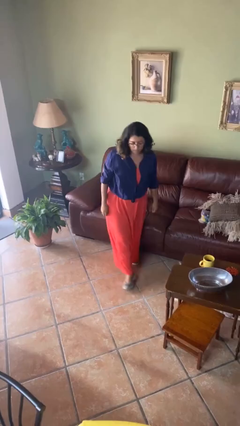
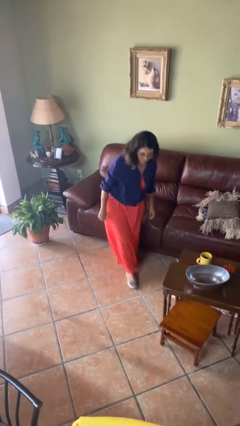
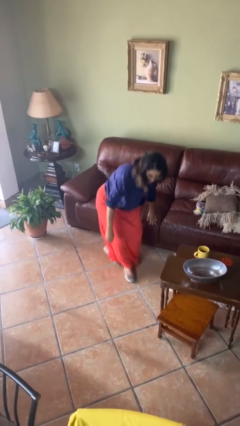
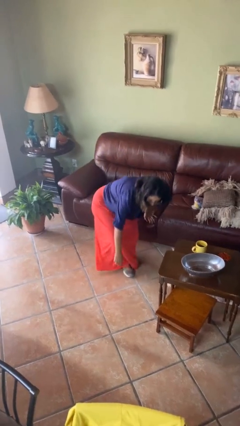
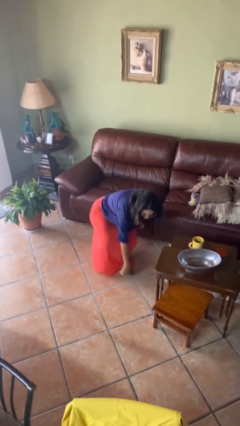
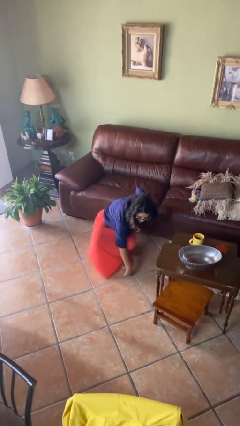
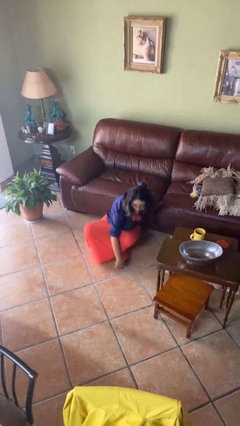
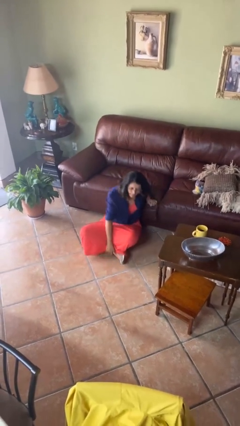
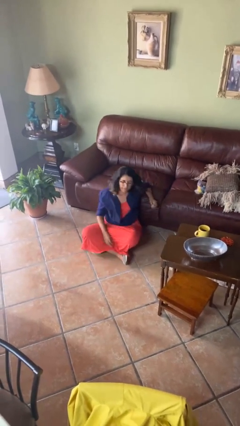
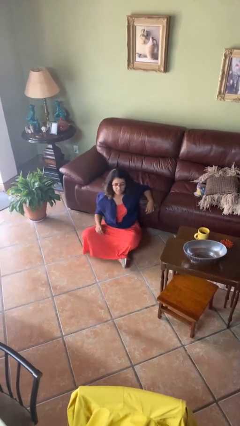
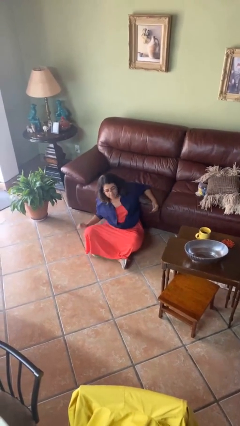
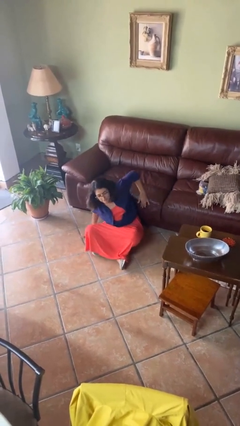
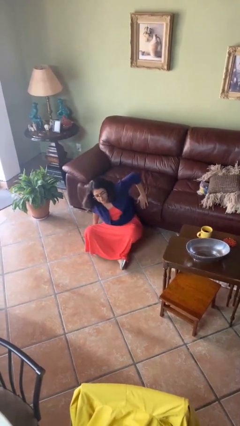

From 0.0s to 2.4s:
person sits crisscross

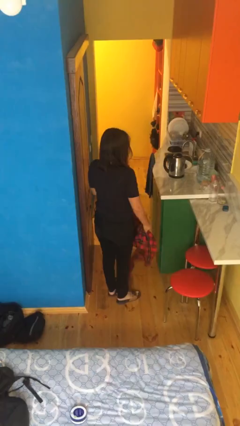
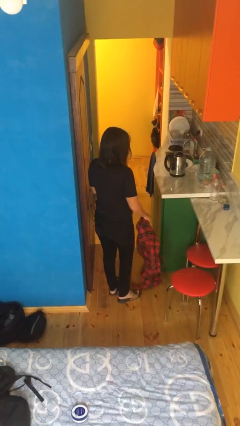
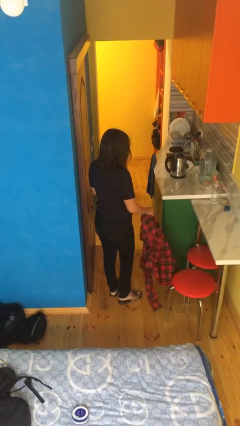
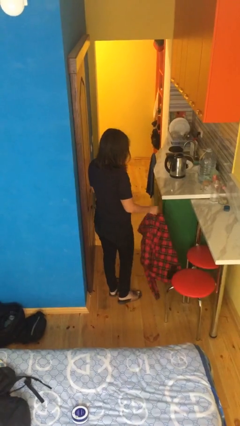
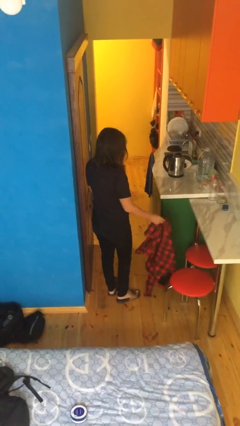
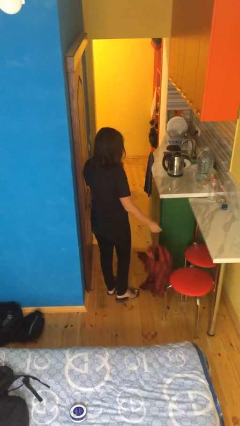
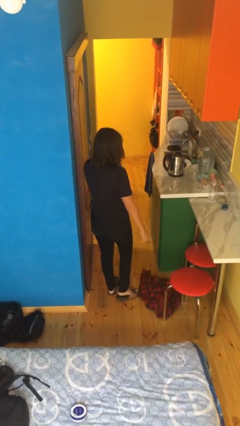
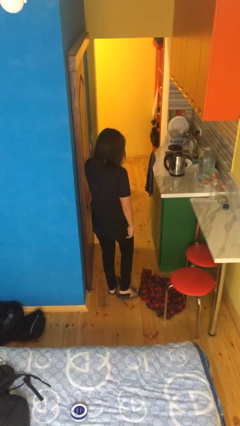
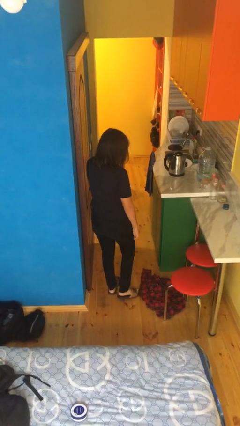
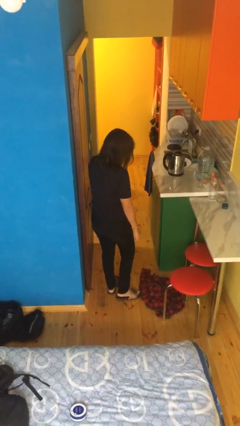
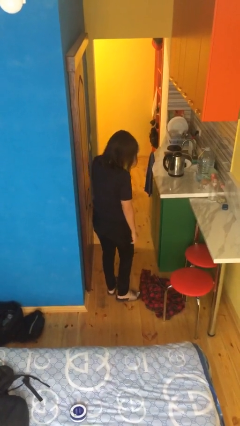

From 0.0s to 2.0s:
person drops object

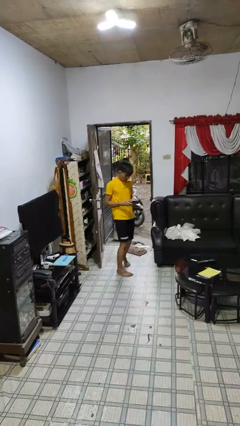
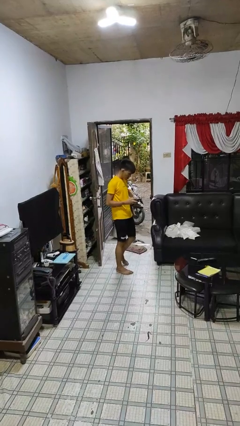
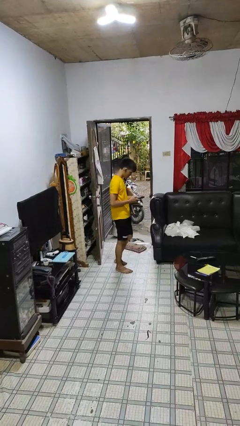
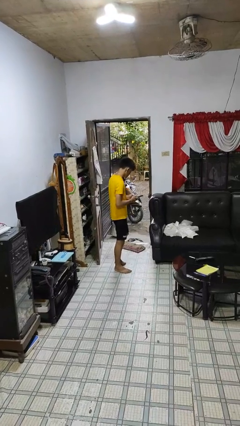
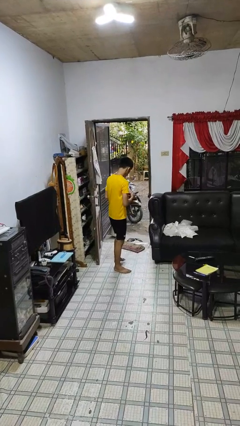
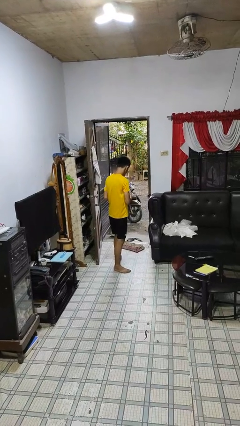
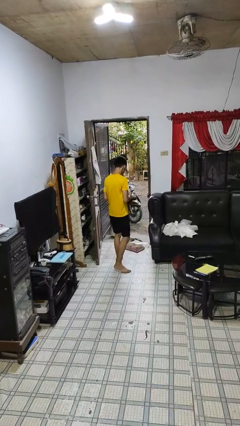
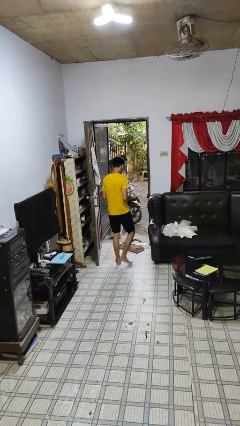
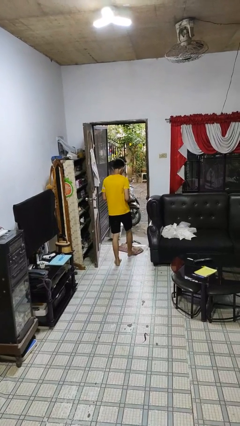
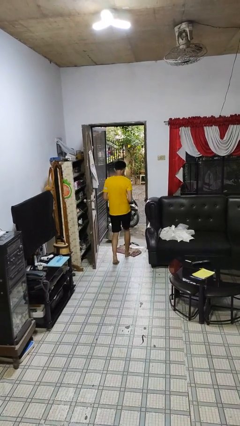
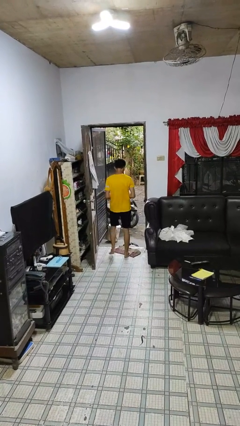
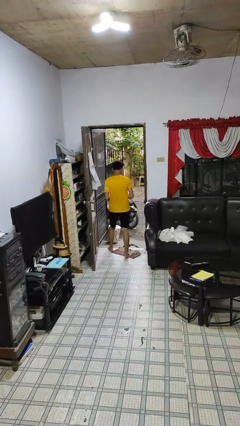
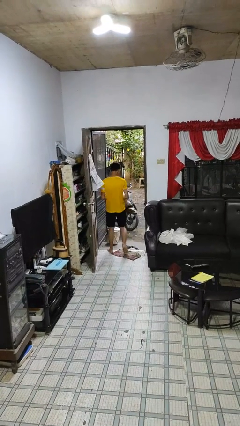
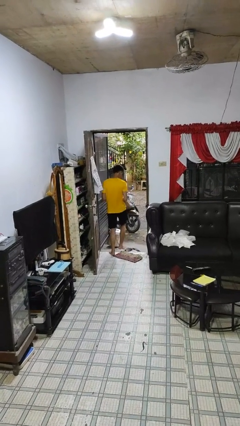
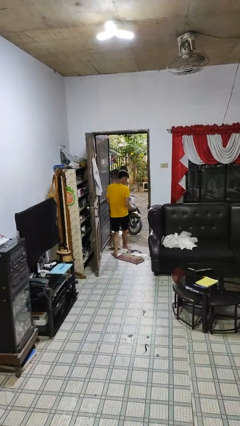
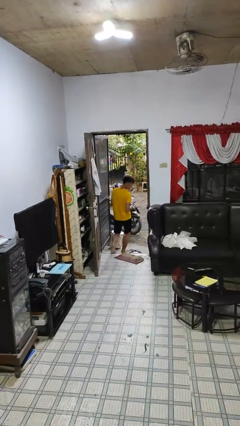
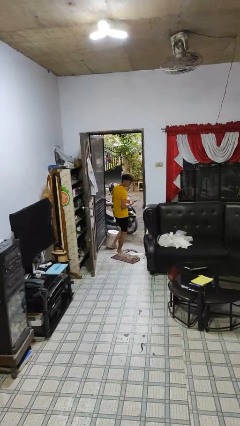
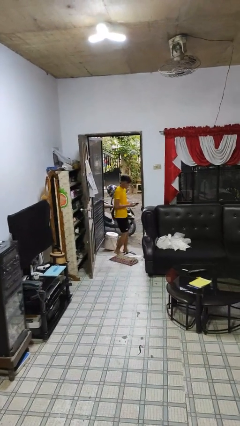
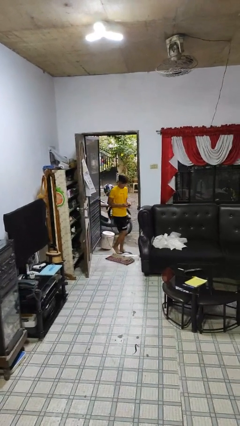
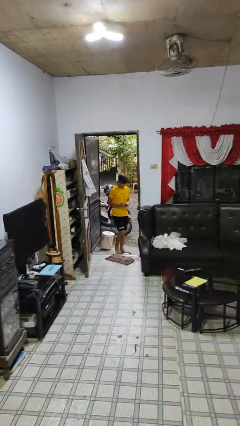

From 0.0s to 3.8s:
person exits scene through structure

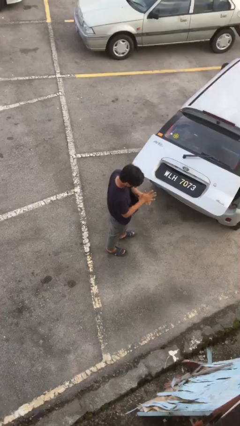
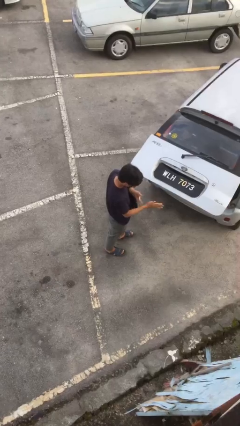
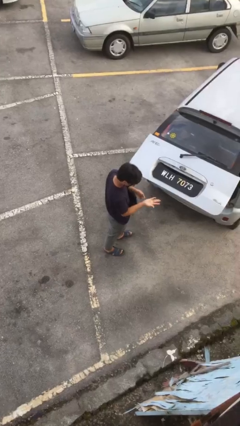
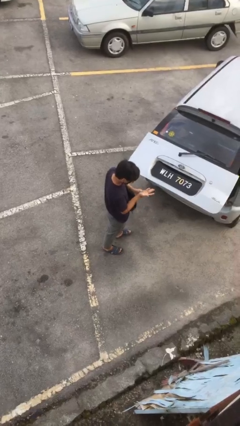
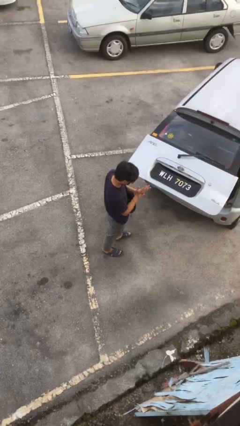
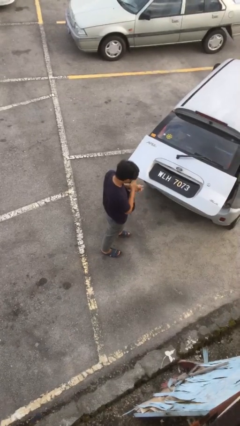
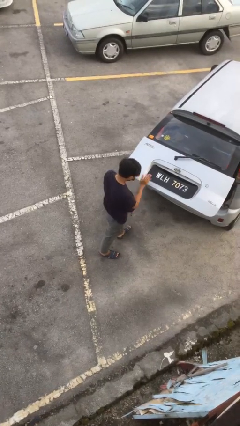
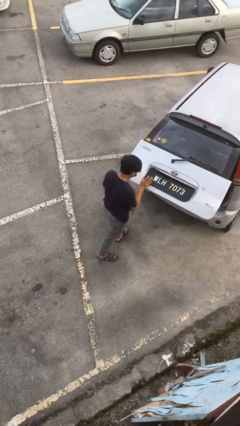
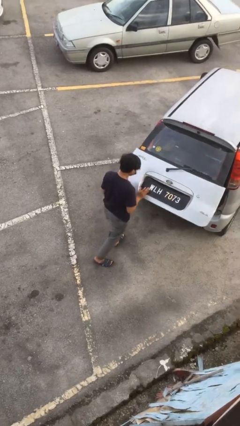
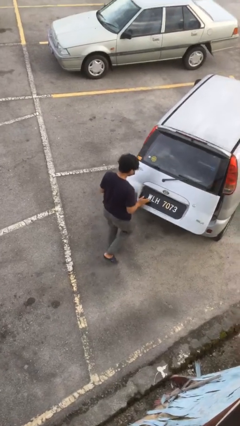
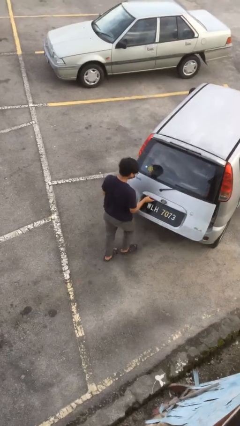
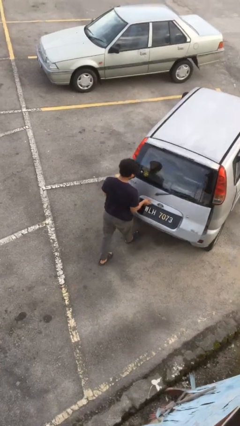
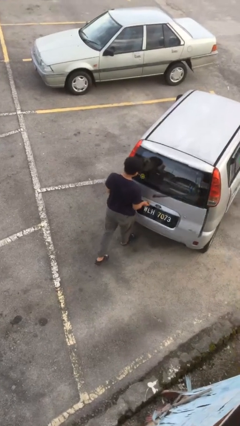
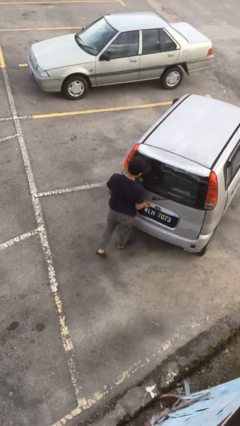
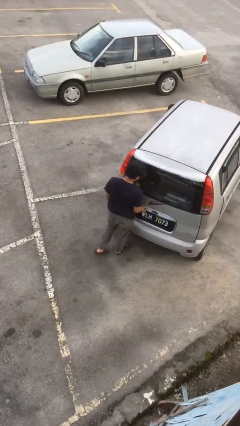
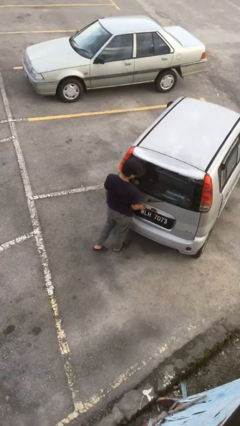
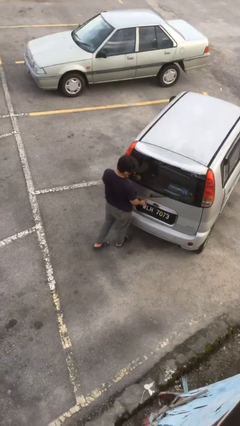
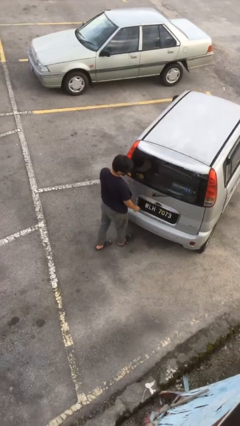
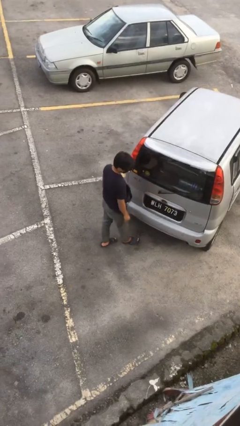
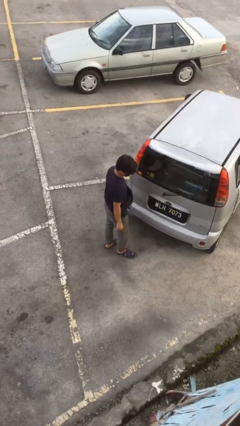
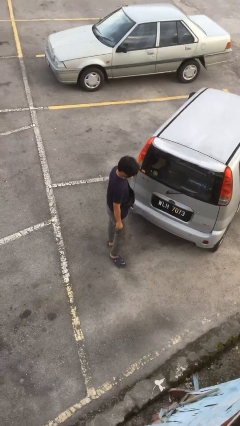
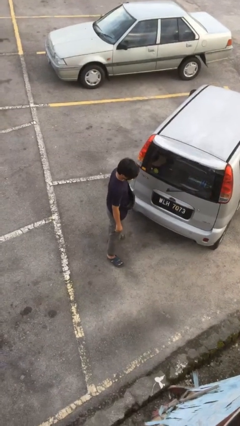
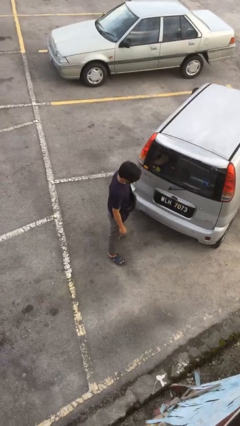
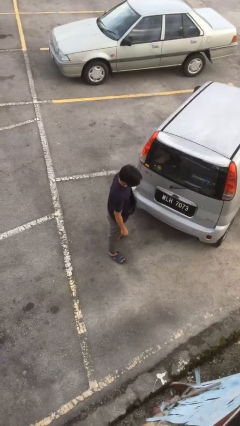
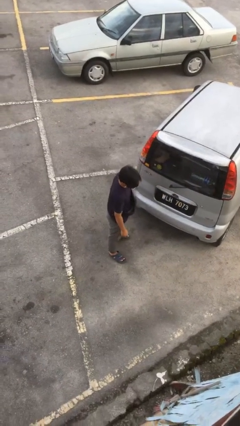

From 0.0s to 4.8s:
person closes car trunk

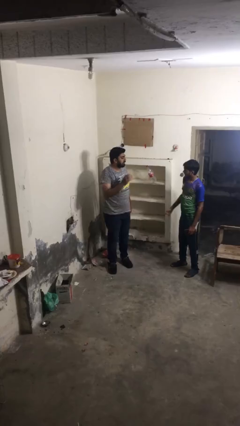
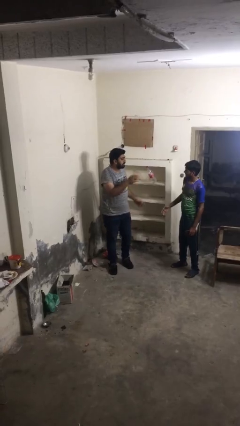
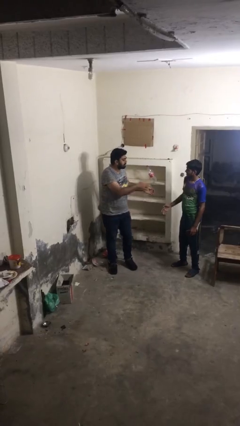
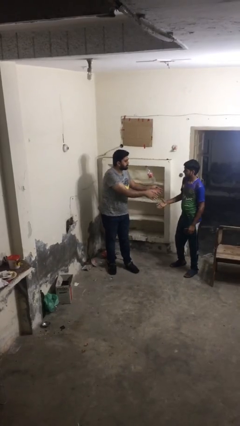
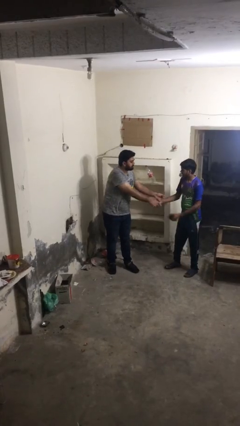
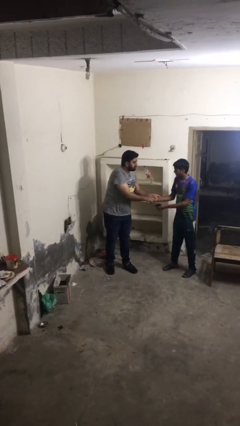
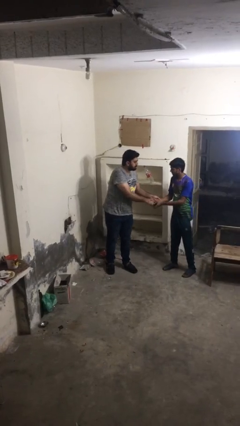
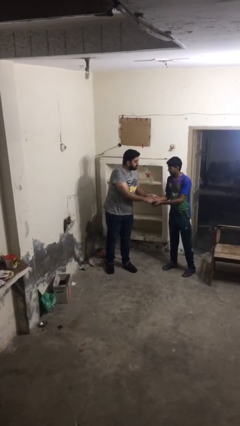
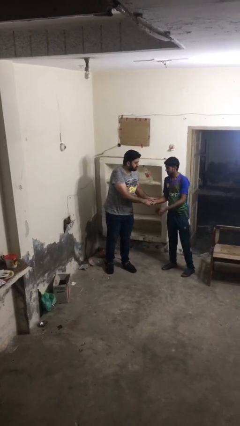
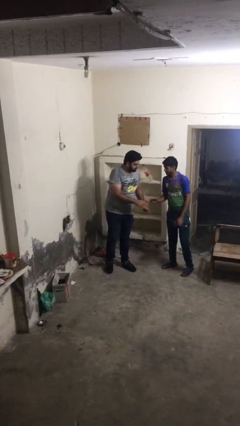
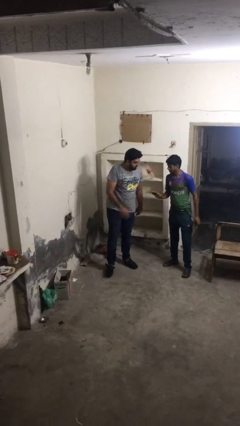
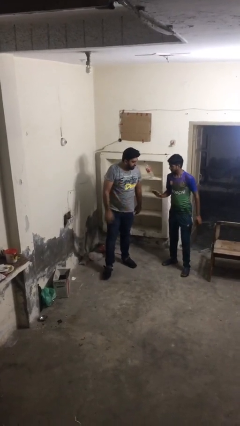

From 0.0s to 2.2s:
person shakes hand

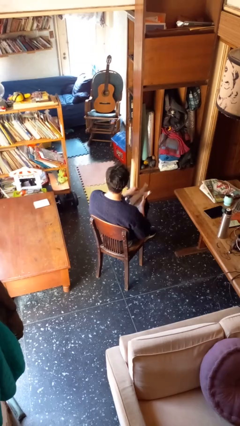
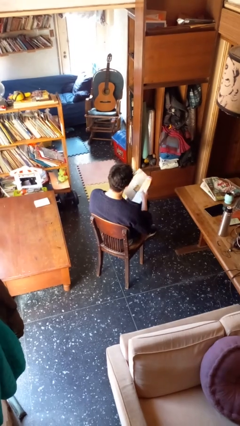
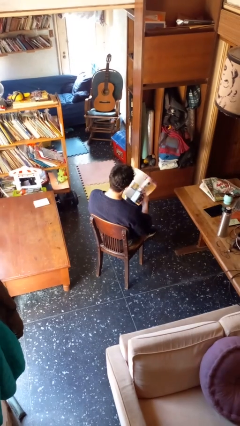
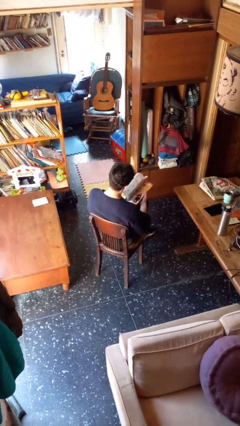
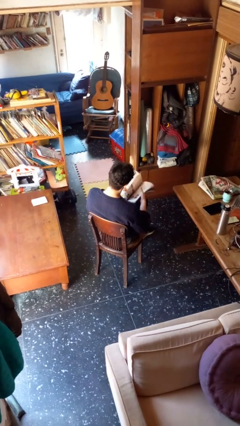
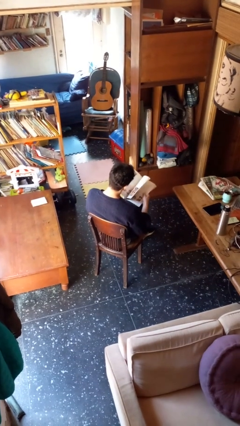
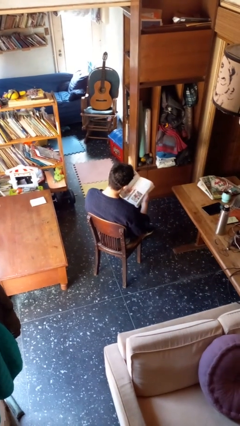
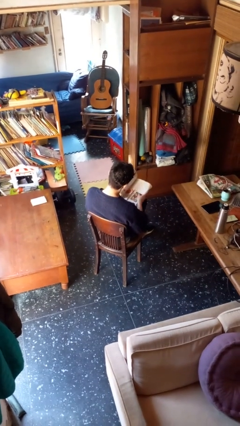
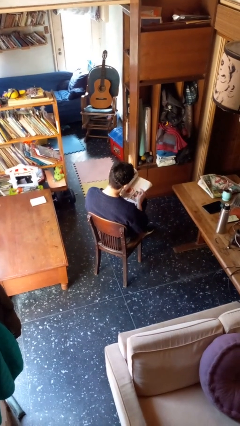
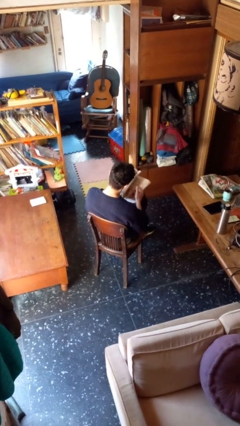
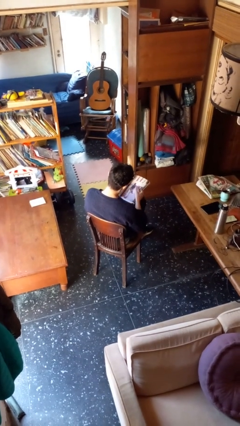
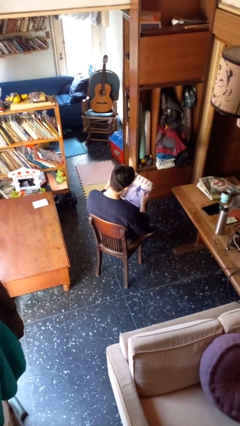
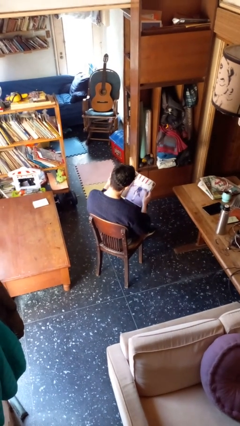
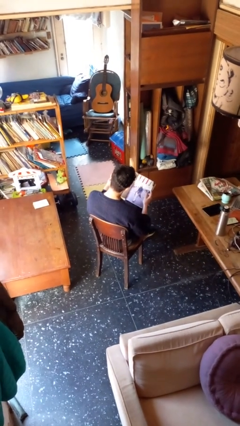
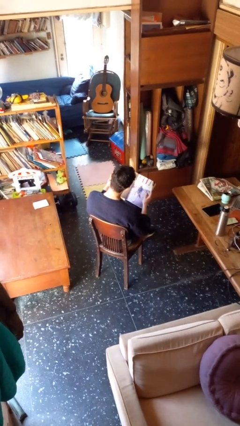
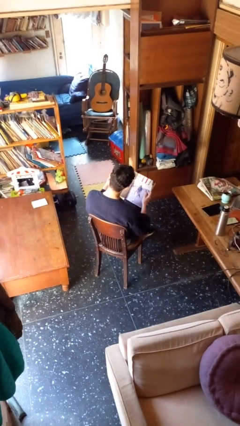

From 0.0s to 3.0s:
person reads magazine
